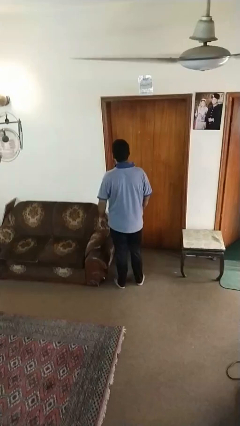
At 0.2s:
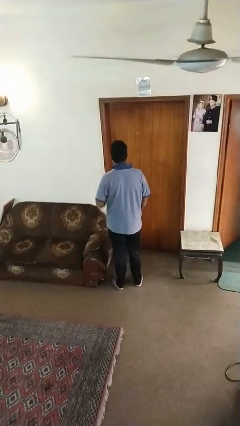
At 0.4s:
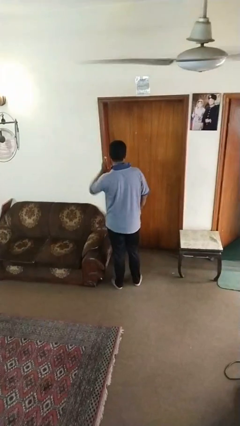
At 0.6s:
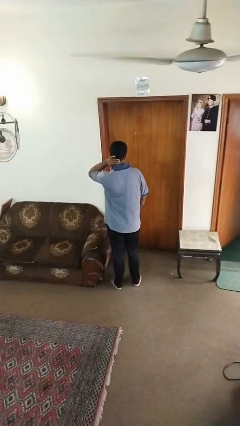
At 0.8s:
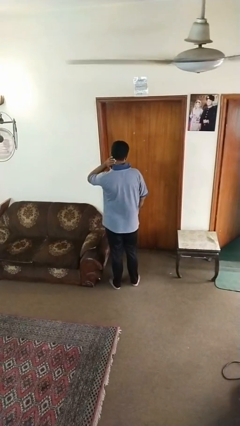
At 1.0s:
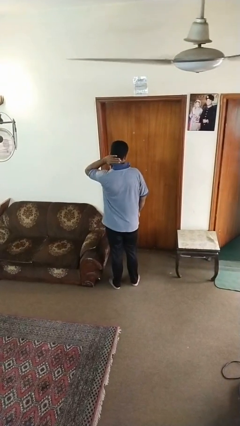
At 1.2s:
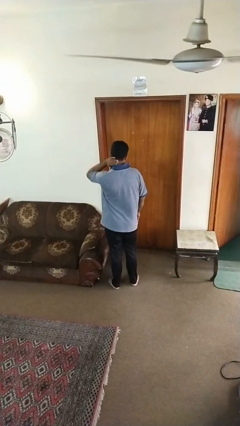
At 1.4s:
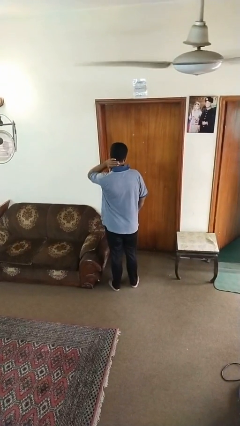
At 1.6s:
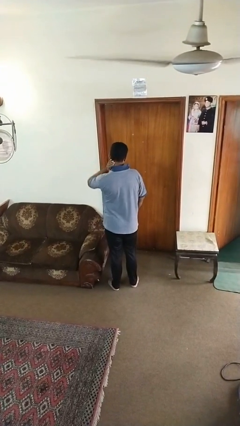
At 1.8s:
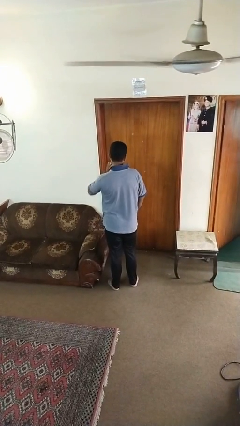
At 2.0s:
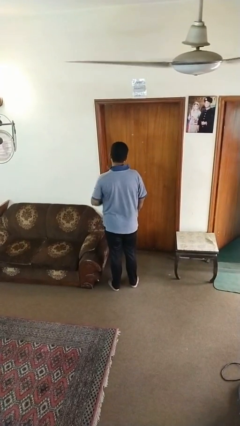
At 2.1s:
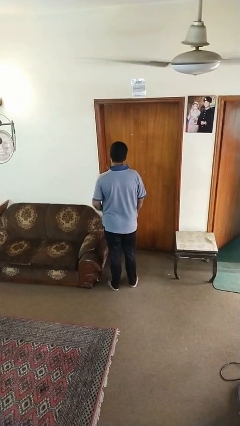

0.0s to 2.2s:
person rubs neck

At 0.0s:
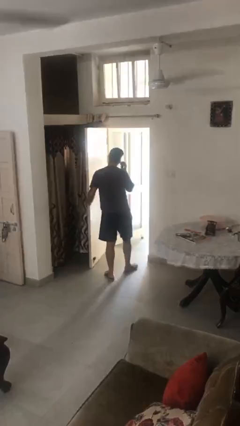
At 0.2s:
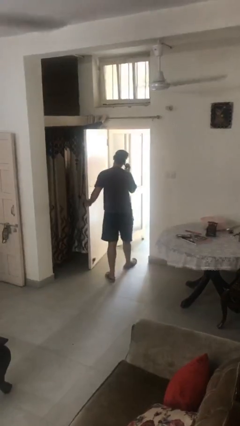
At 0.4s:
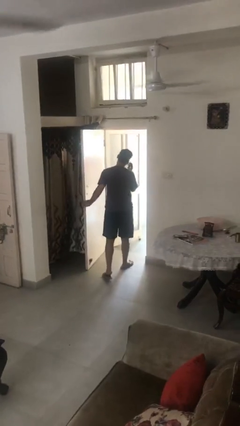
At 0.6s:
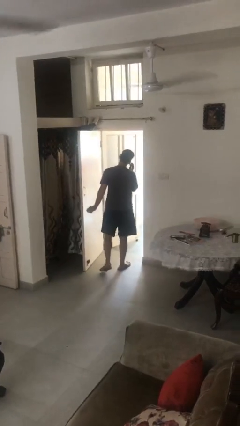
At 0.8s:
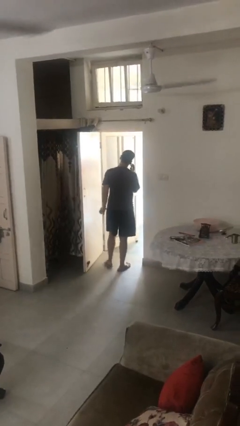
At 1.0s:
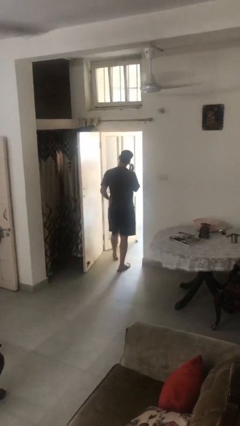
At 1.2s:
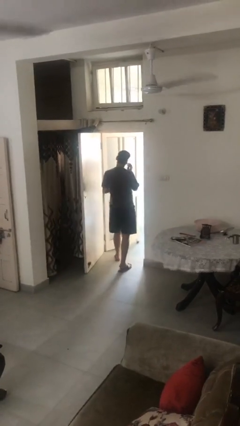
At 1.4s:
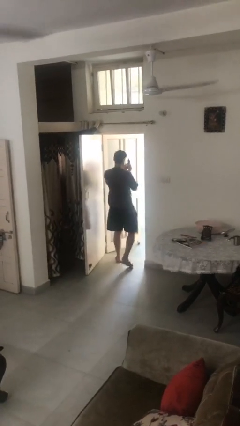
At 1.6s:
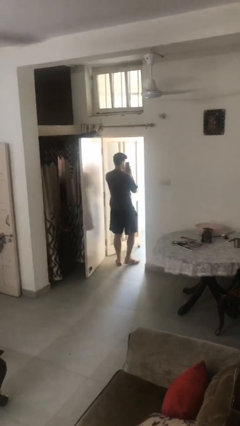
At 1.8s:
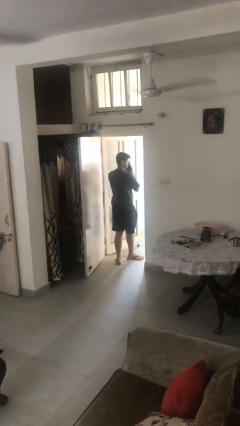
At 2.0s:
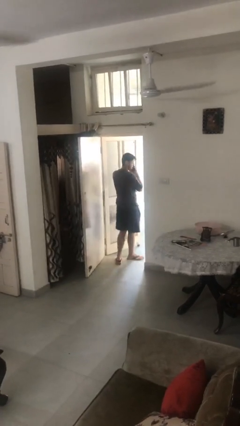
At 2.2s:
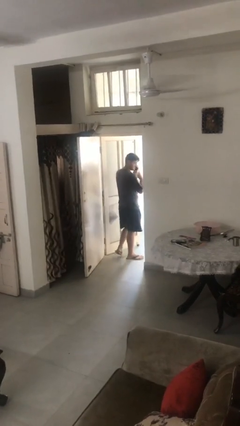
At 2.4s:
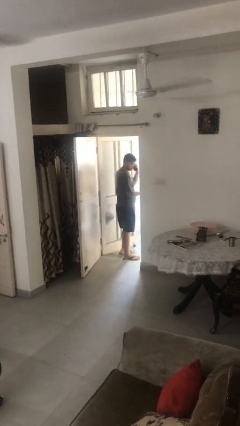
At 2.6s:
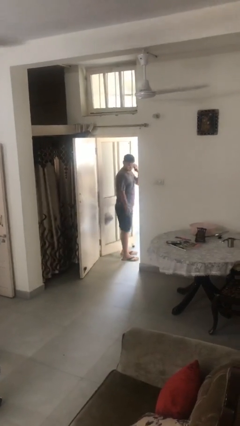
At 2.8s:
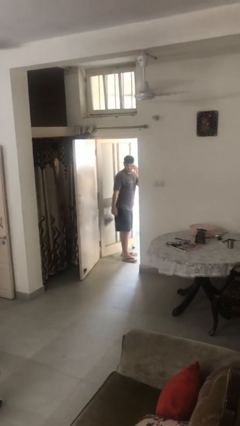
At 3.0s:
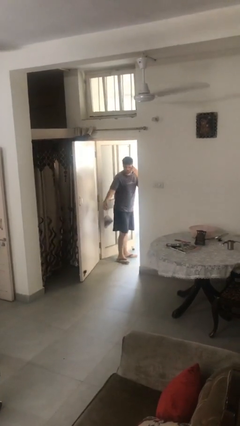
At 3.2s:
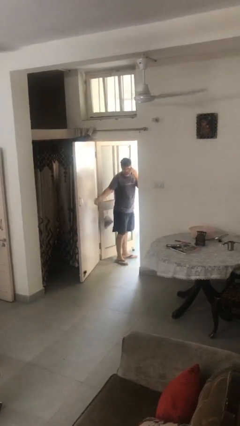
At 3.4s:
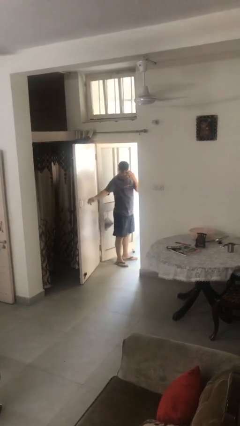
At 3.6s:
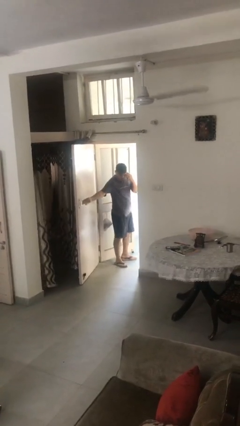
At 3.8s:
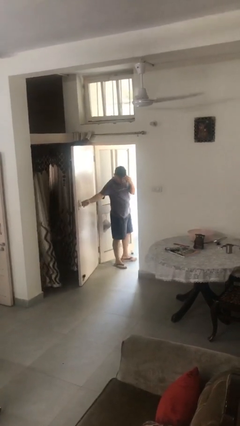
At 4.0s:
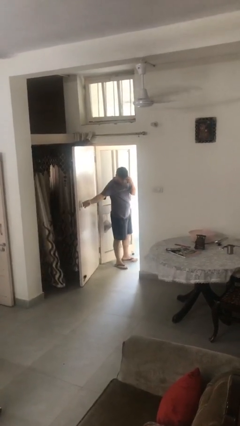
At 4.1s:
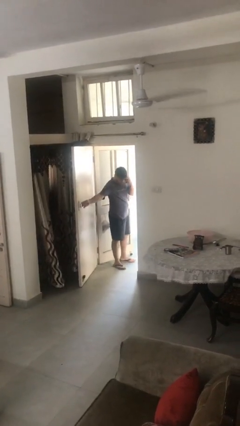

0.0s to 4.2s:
person exits scene through structure

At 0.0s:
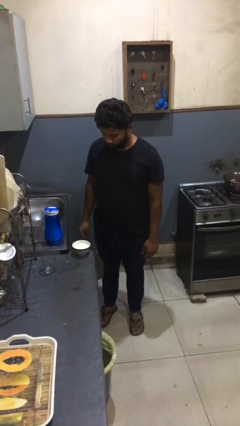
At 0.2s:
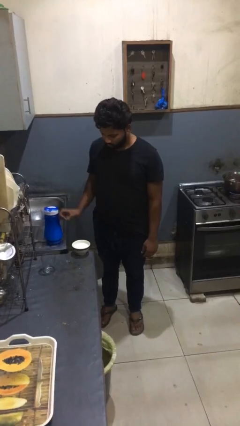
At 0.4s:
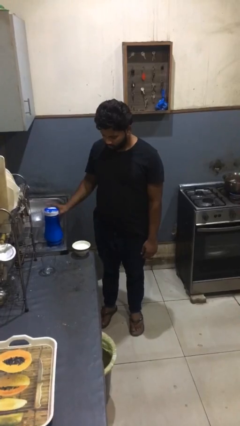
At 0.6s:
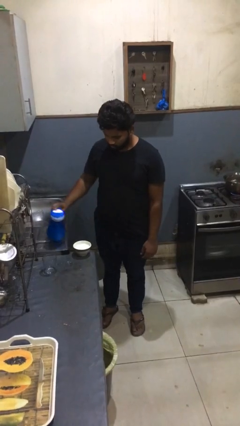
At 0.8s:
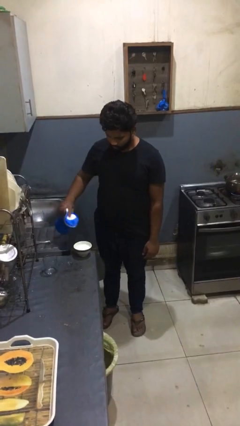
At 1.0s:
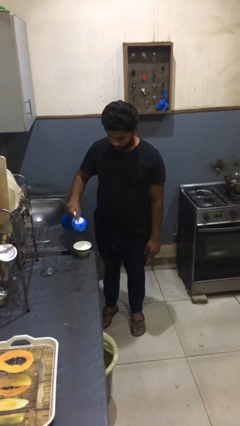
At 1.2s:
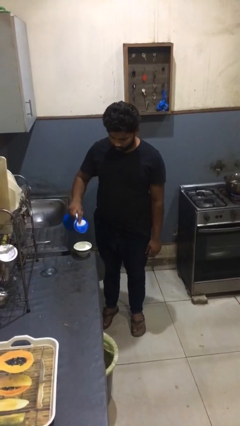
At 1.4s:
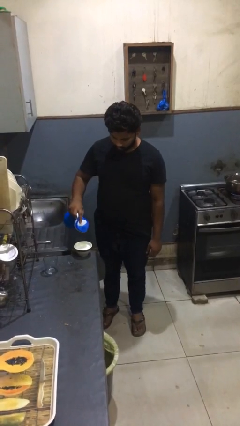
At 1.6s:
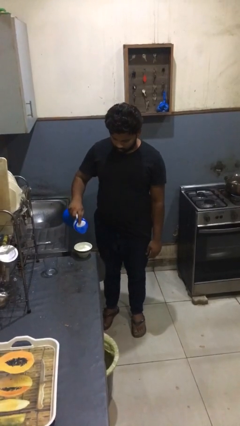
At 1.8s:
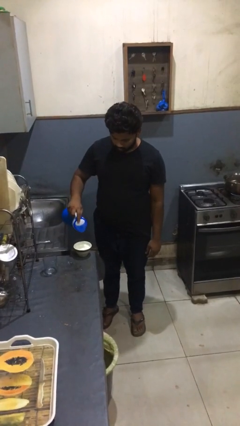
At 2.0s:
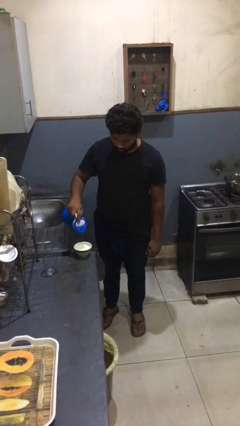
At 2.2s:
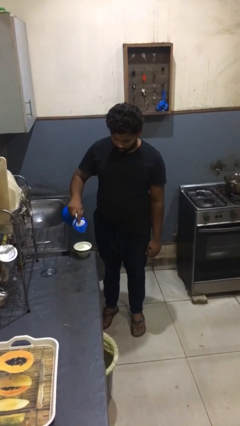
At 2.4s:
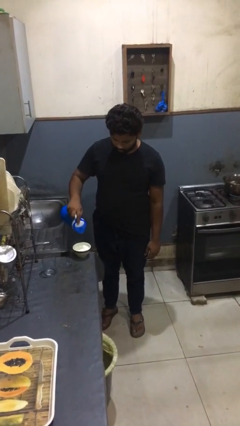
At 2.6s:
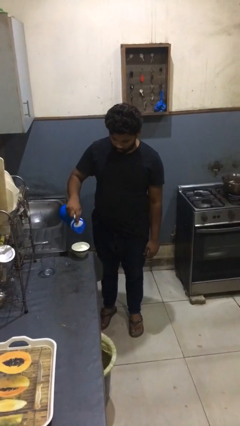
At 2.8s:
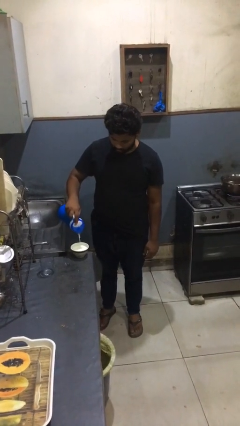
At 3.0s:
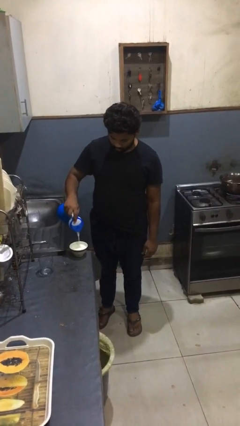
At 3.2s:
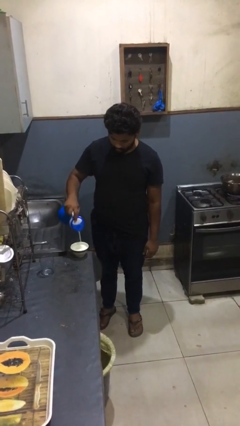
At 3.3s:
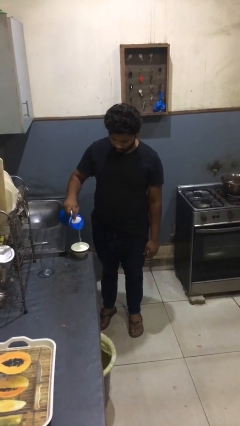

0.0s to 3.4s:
person pours into bowl

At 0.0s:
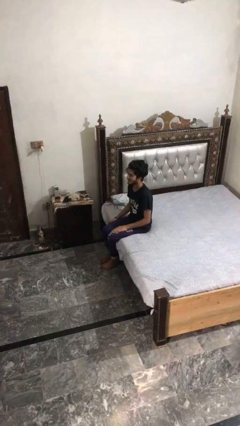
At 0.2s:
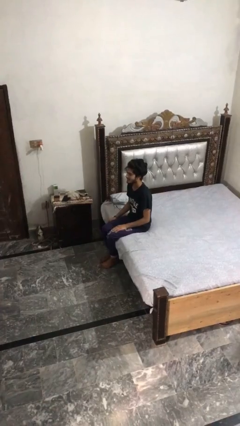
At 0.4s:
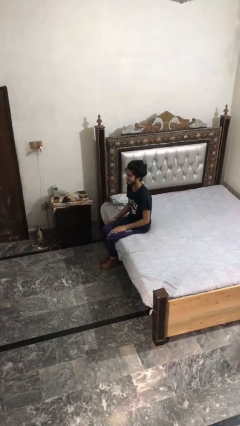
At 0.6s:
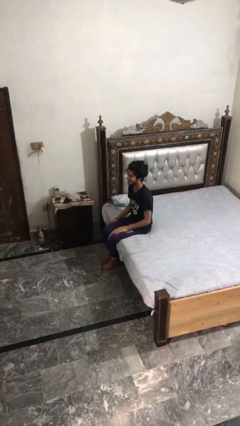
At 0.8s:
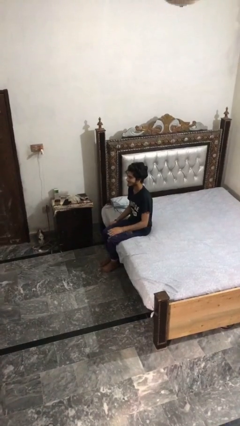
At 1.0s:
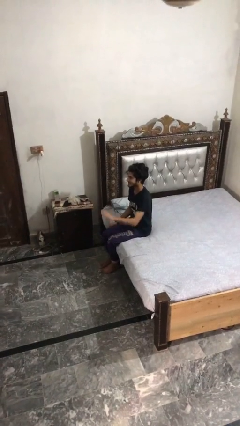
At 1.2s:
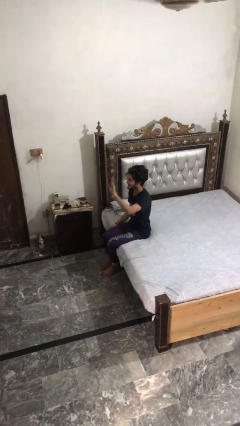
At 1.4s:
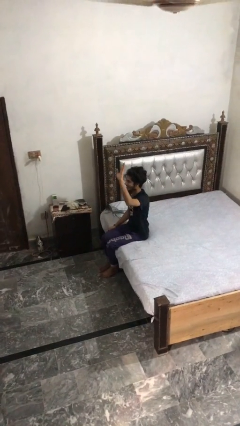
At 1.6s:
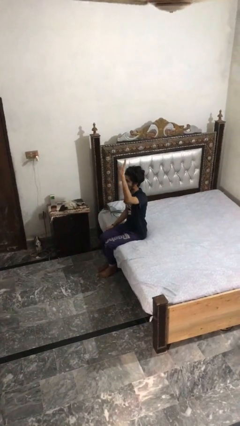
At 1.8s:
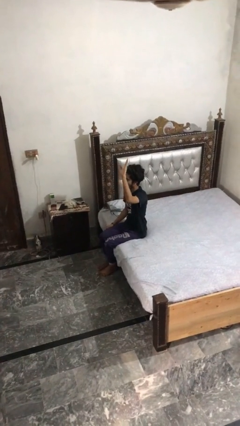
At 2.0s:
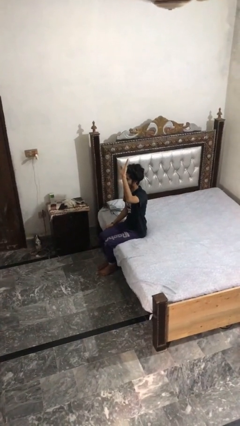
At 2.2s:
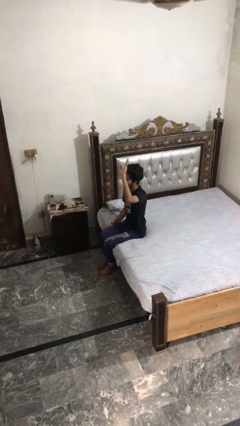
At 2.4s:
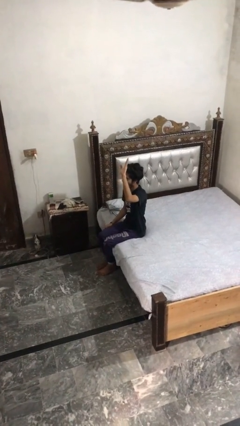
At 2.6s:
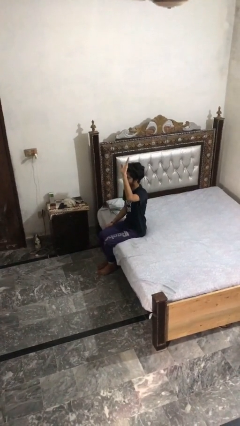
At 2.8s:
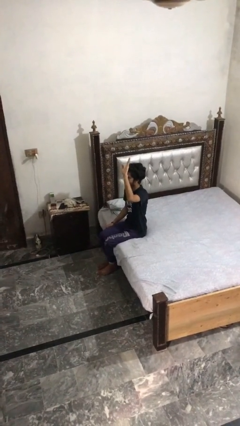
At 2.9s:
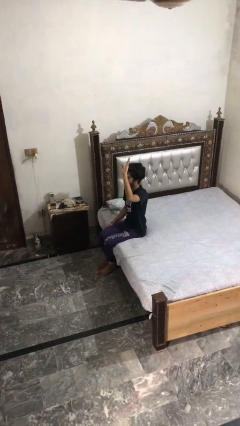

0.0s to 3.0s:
person gestures raise hand

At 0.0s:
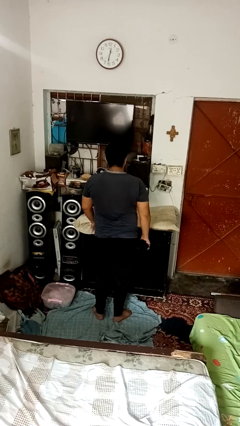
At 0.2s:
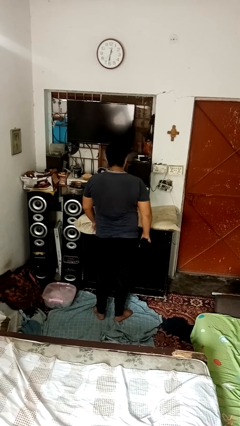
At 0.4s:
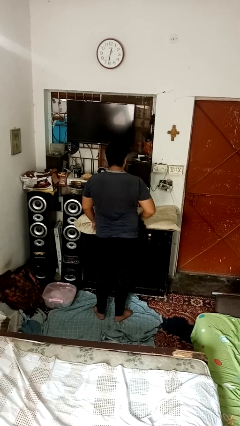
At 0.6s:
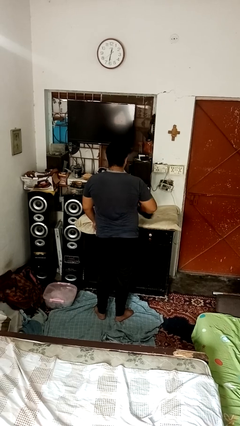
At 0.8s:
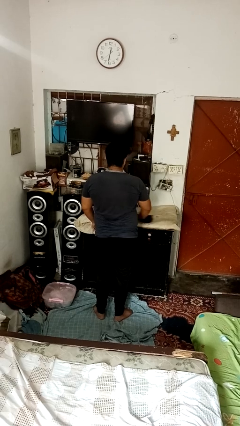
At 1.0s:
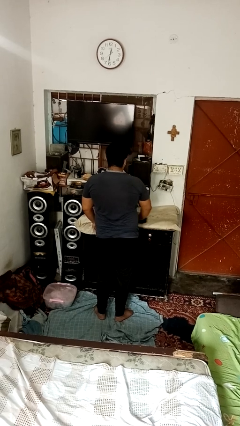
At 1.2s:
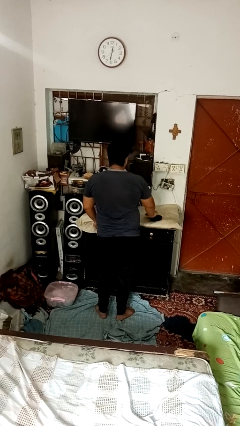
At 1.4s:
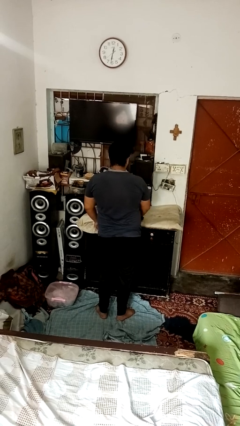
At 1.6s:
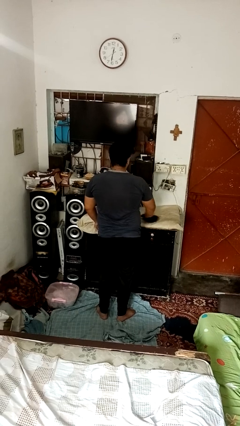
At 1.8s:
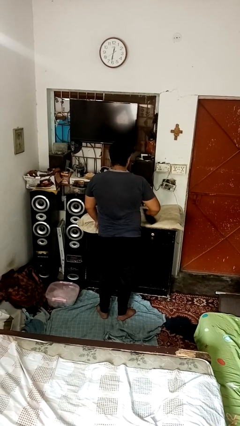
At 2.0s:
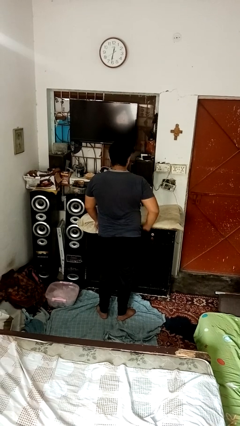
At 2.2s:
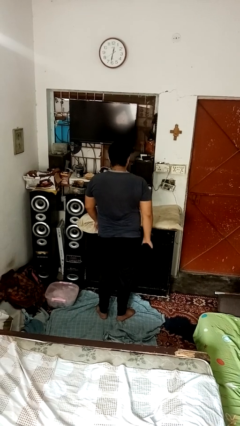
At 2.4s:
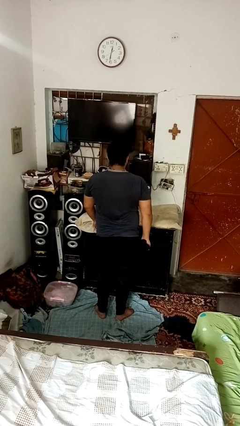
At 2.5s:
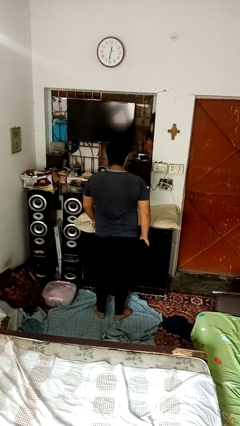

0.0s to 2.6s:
person cleans table with rag

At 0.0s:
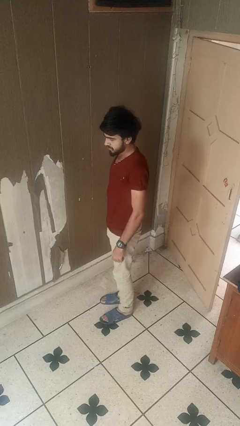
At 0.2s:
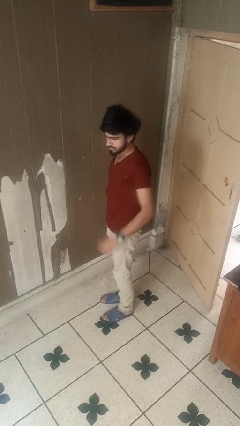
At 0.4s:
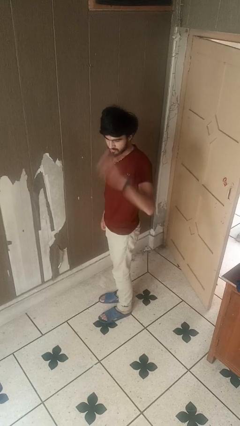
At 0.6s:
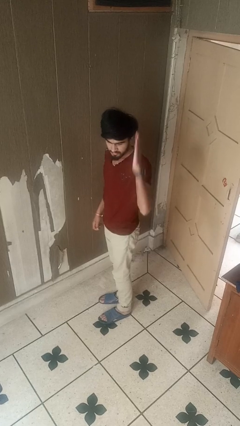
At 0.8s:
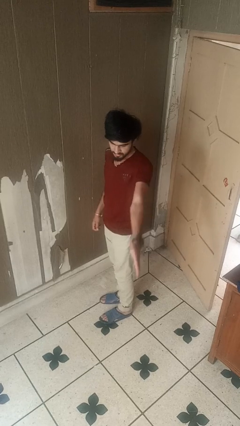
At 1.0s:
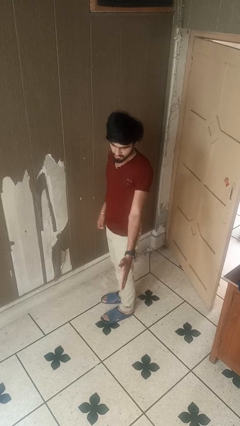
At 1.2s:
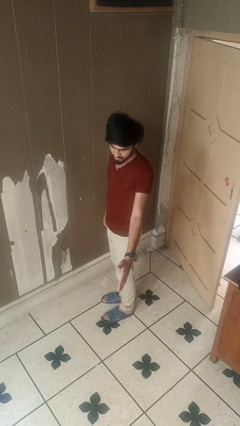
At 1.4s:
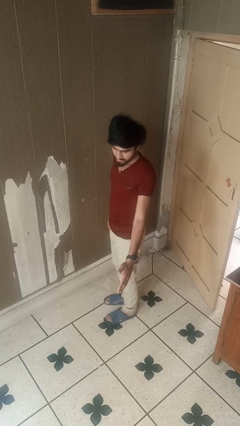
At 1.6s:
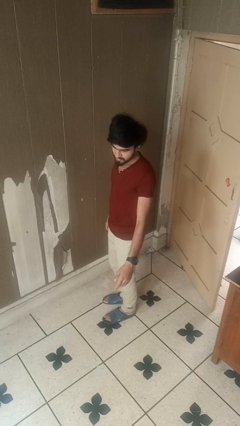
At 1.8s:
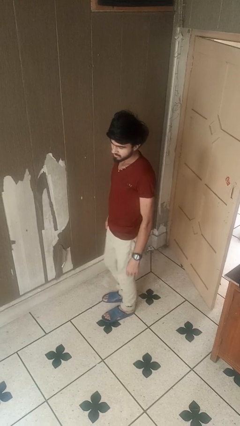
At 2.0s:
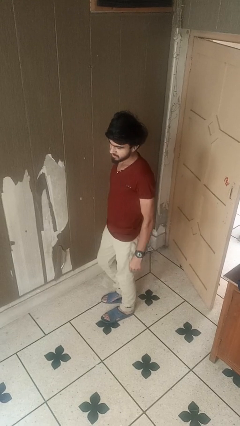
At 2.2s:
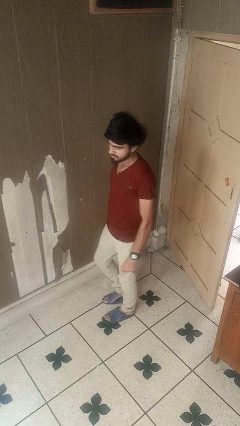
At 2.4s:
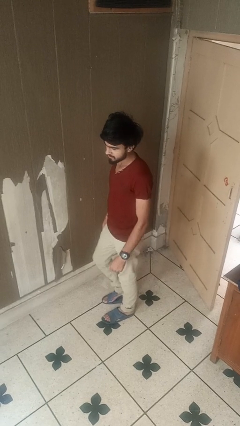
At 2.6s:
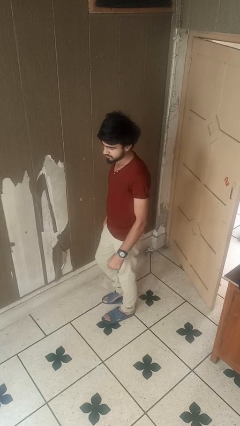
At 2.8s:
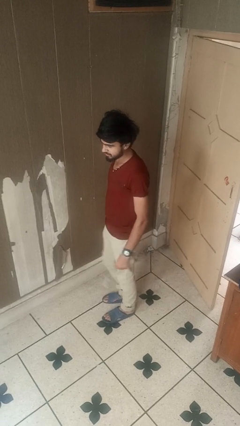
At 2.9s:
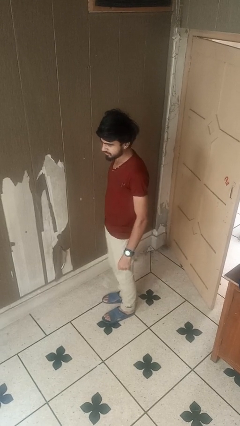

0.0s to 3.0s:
person karate chop
